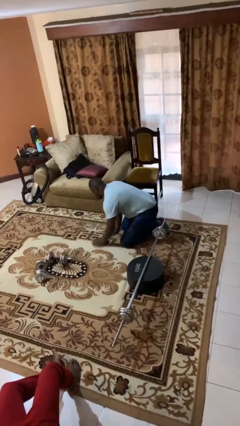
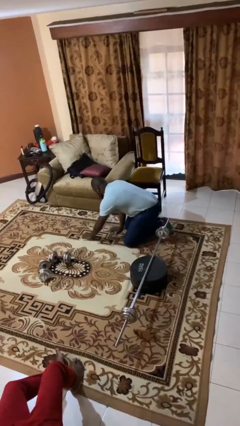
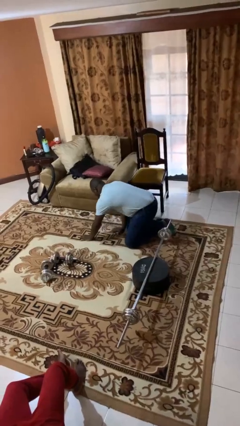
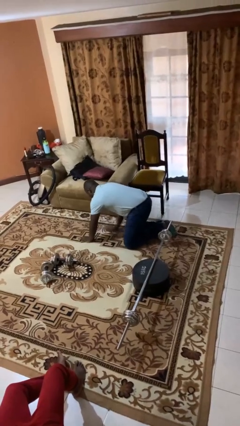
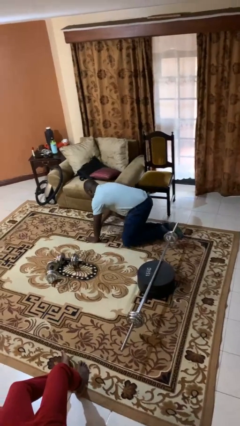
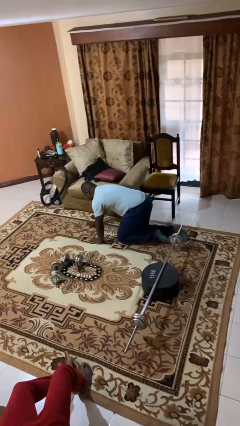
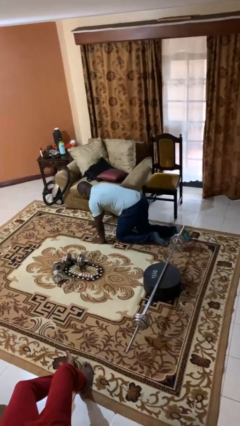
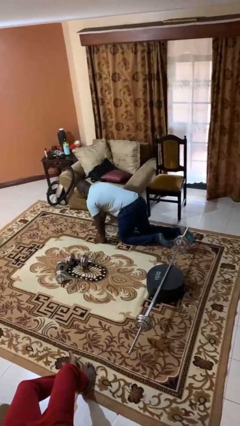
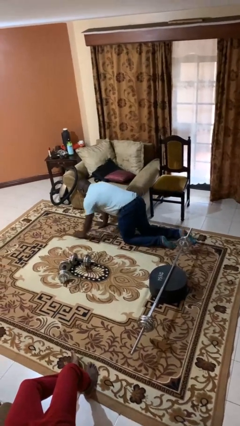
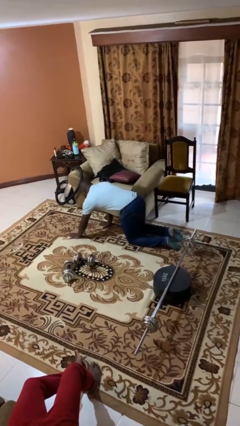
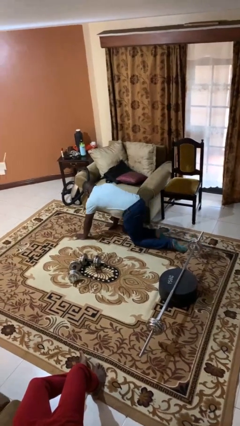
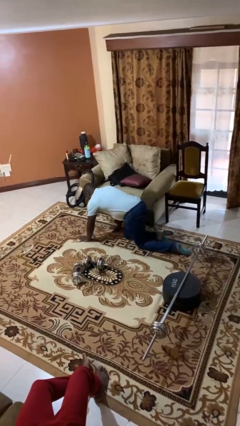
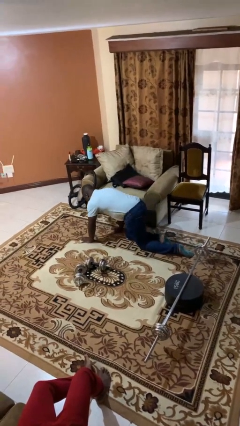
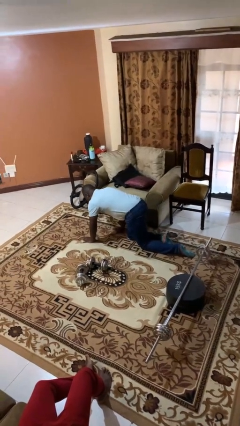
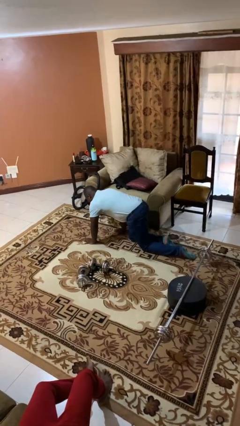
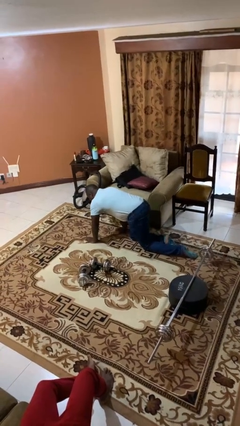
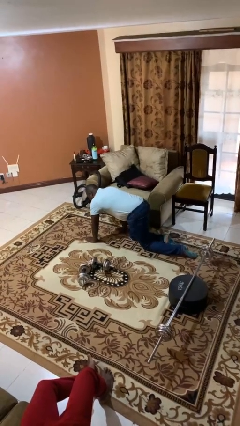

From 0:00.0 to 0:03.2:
person crawls

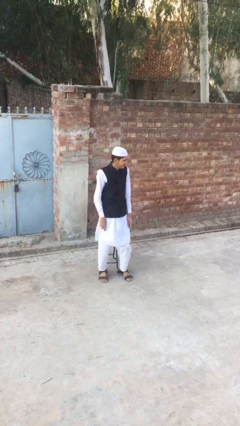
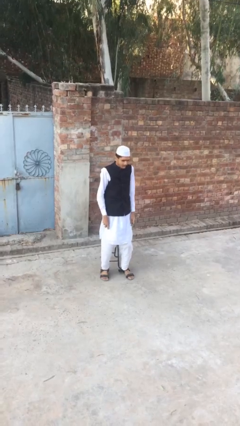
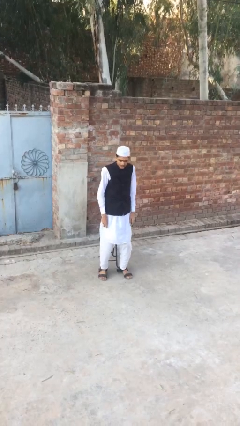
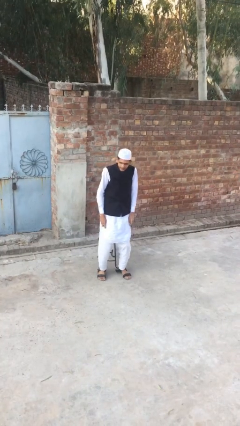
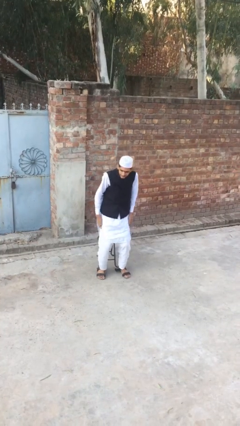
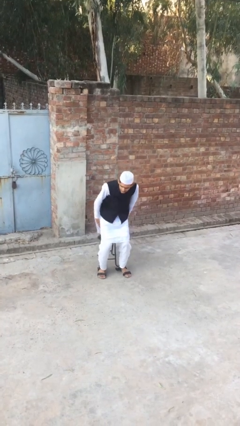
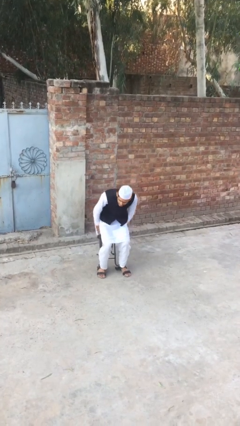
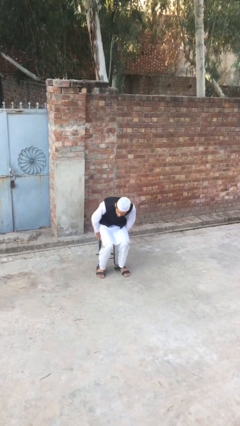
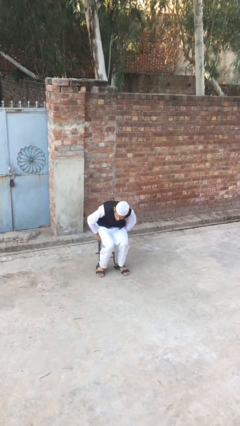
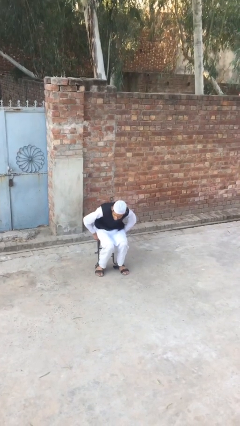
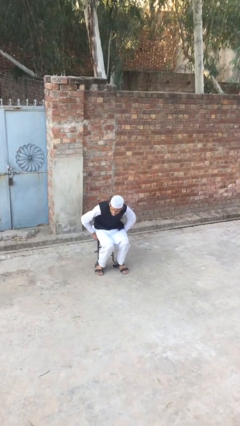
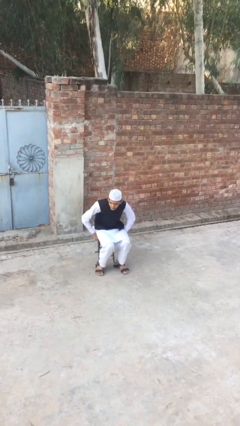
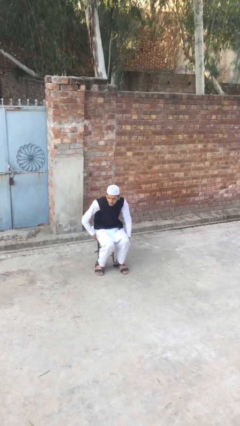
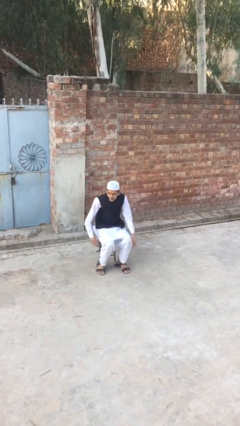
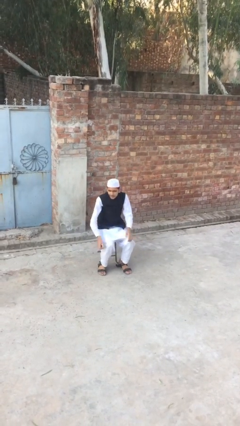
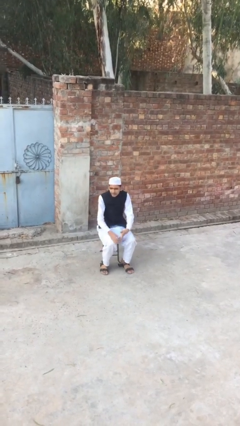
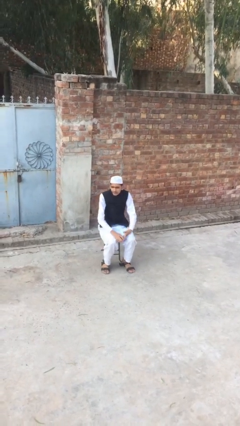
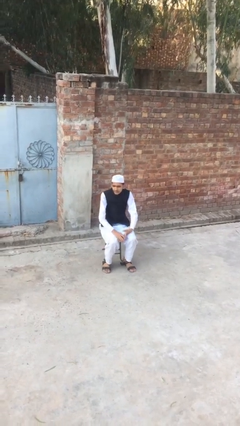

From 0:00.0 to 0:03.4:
person sits down

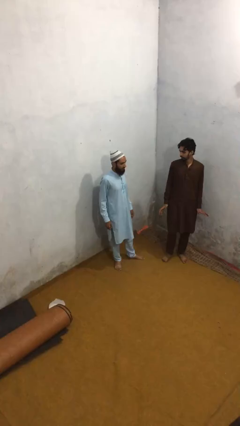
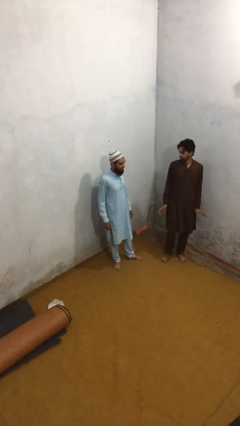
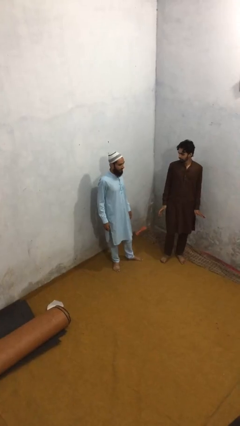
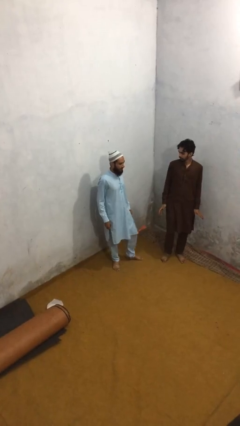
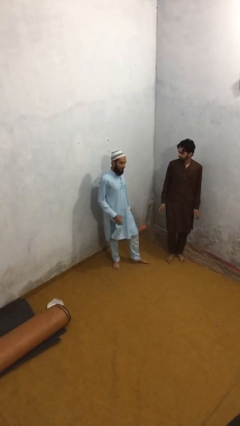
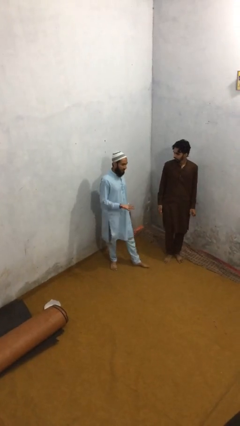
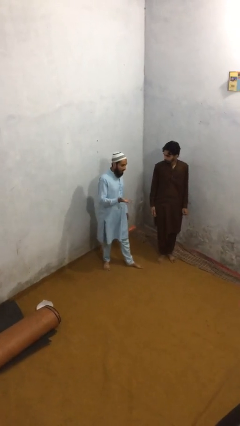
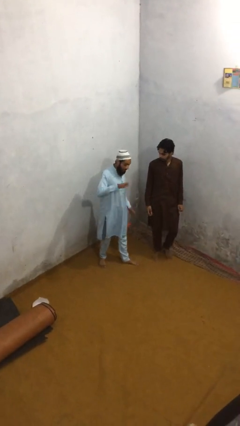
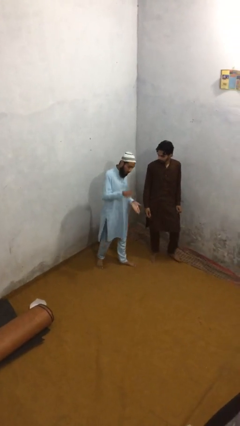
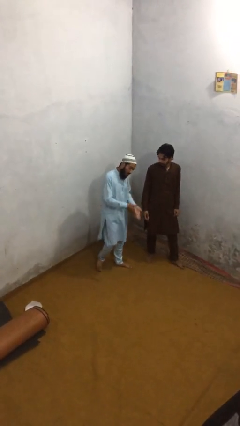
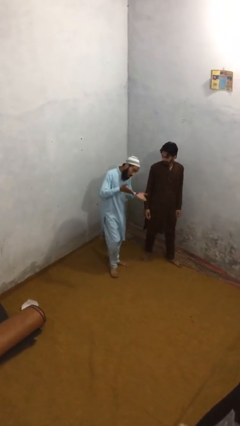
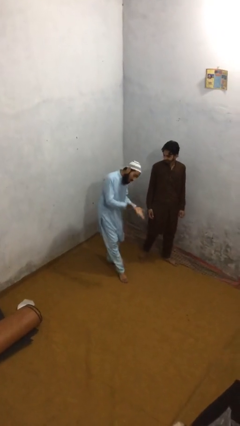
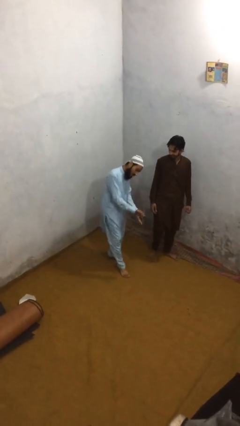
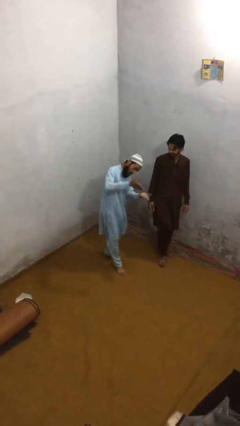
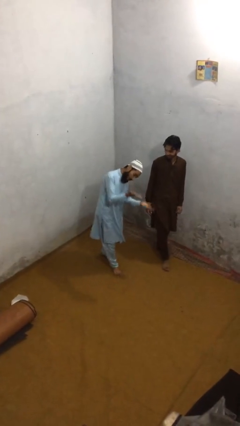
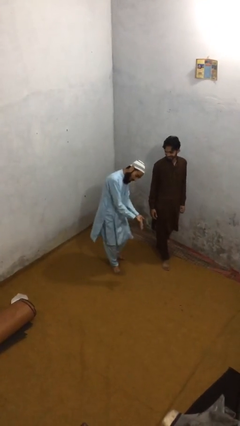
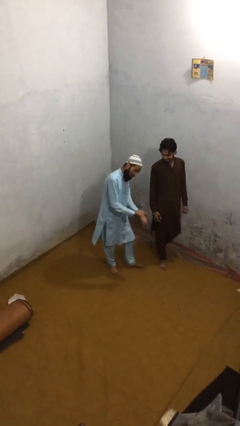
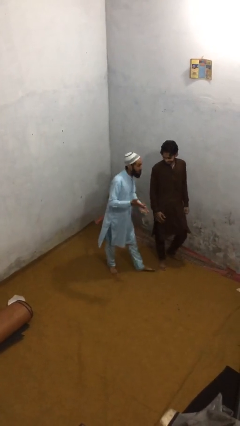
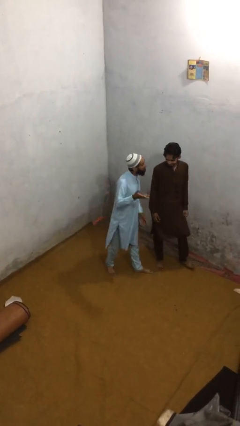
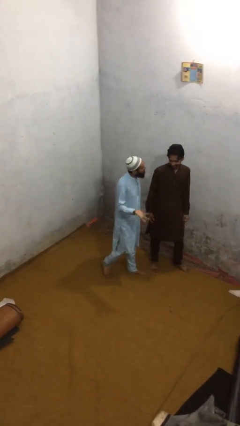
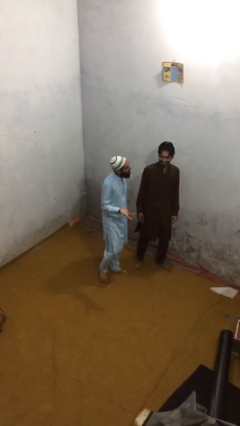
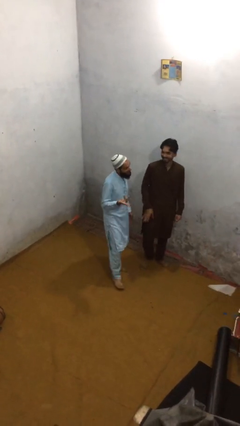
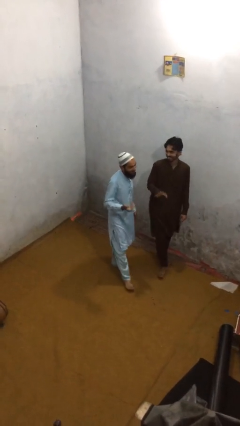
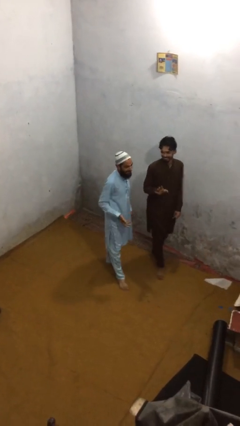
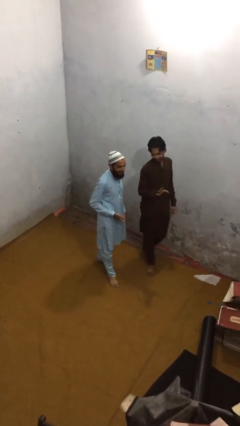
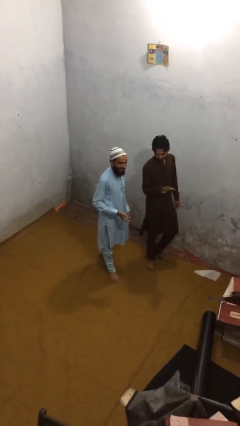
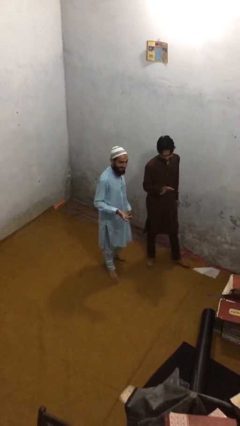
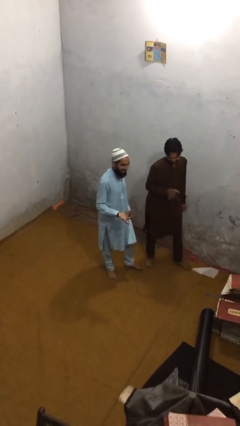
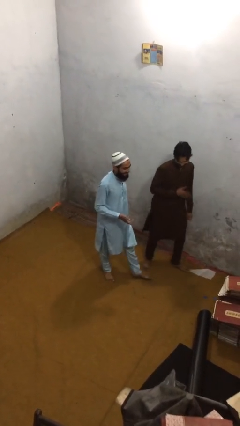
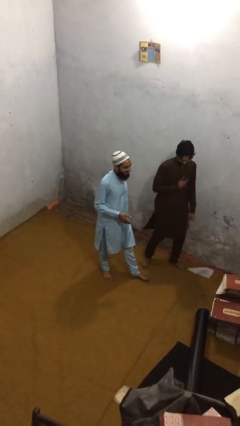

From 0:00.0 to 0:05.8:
person talks to person

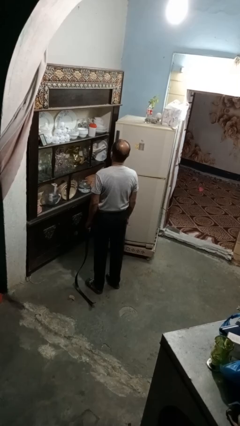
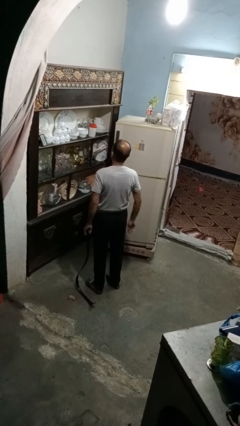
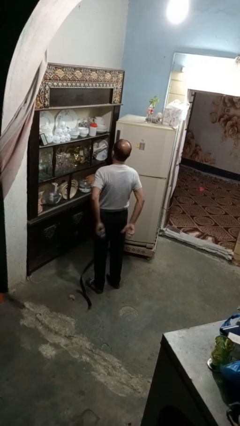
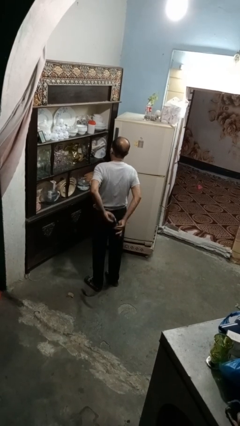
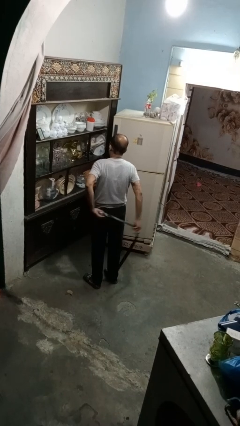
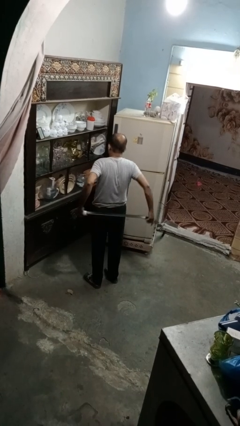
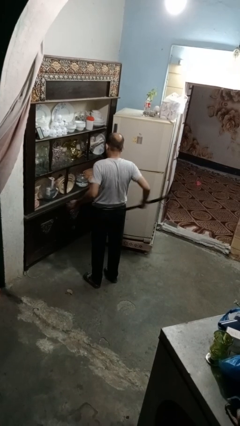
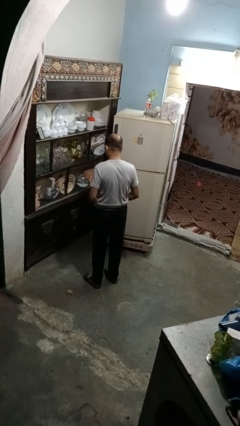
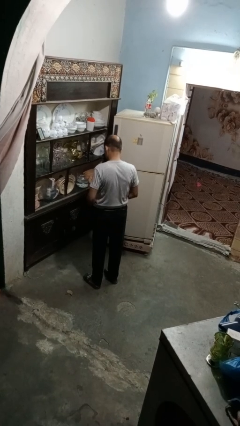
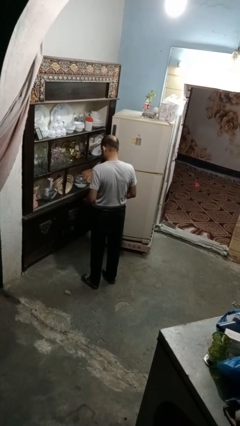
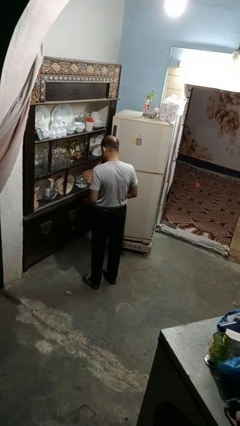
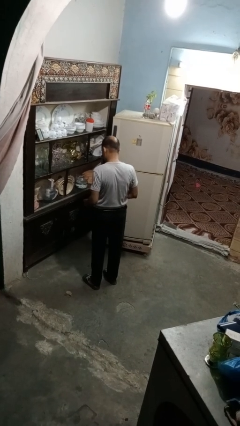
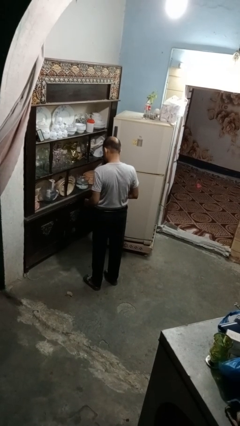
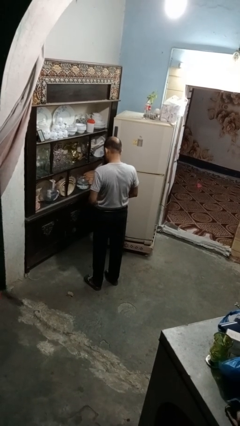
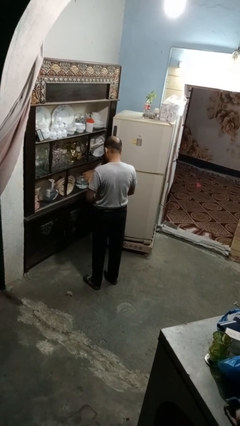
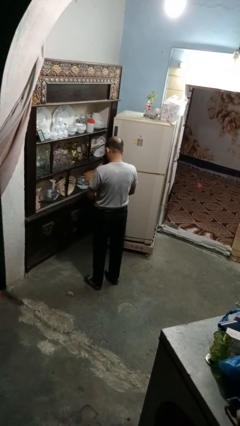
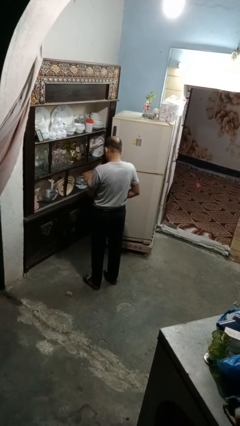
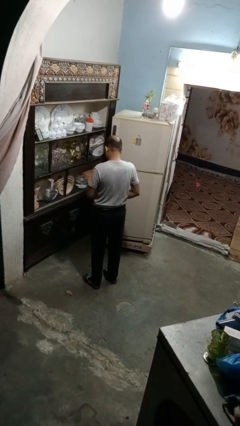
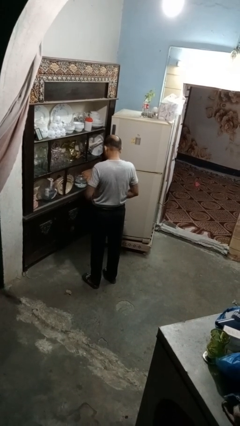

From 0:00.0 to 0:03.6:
person puts on belt

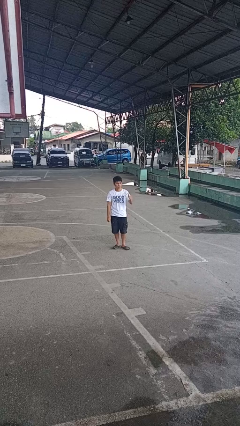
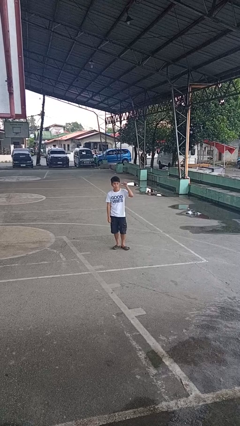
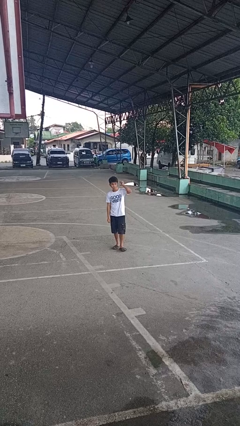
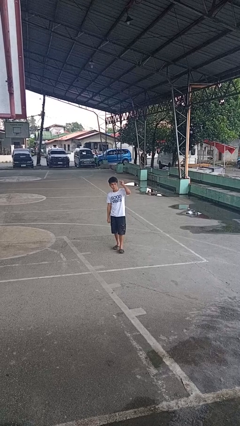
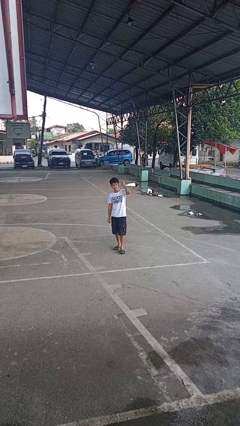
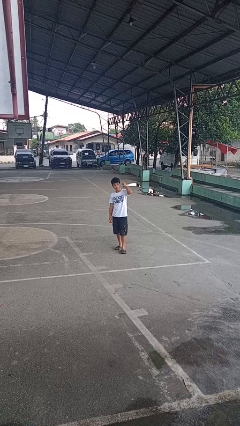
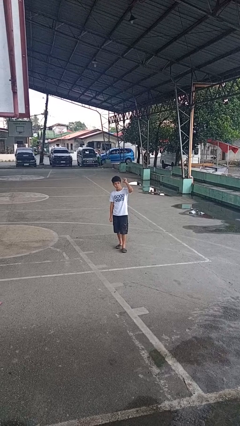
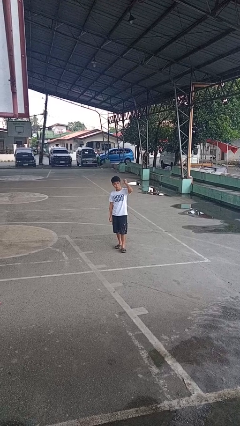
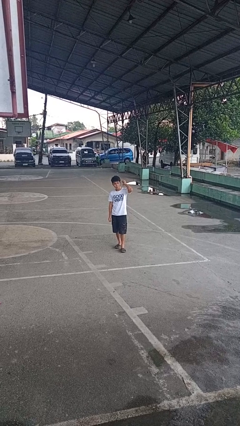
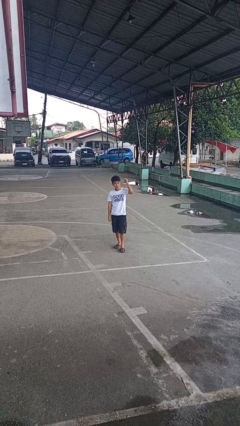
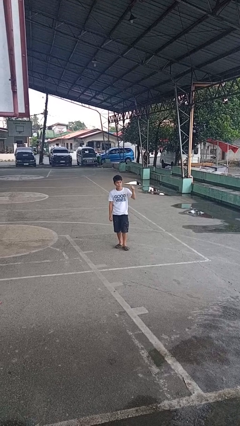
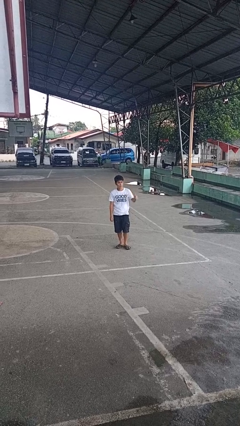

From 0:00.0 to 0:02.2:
person gestures behind me
